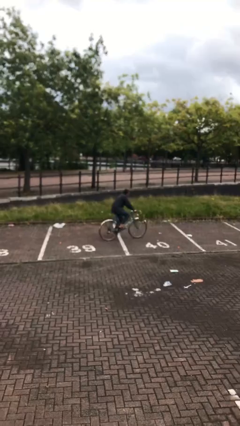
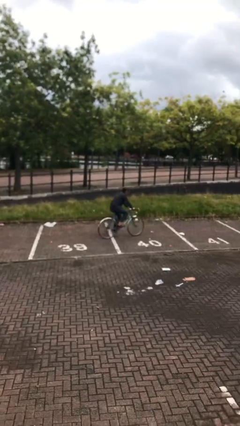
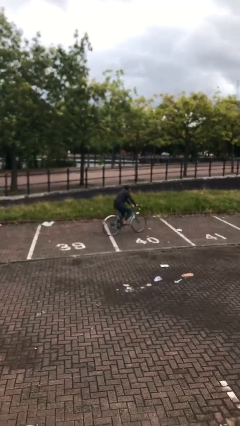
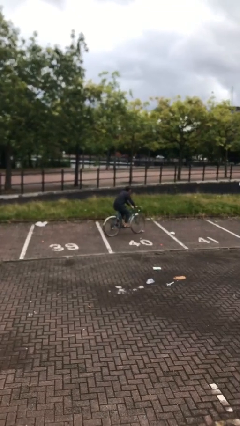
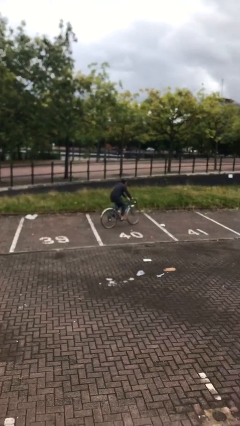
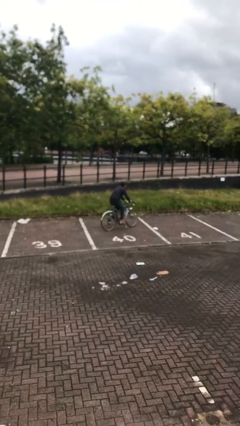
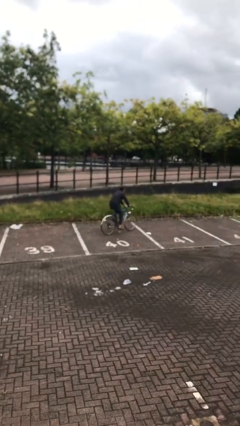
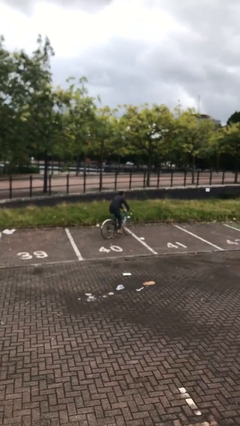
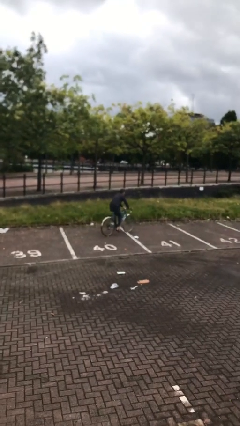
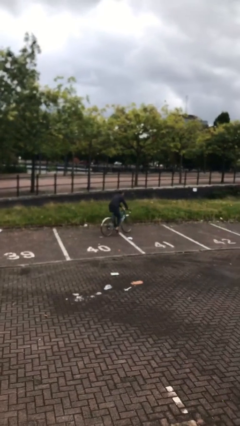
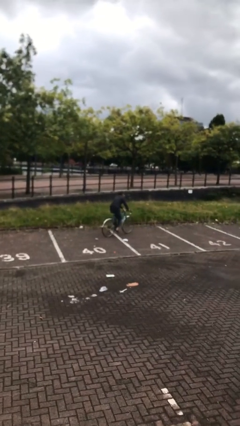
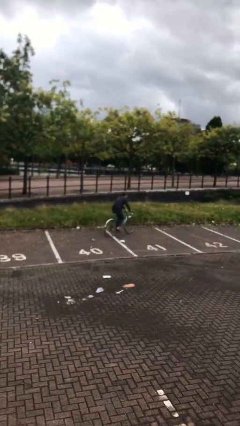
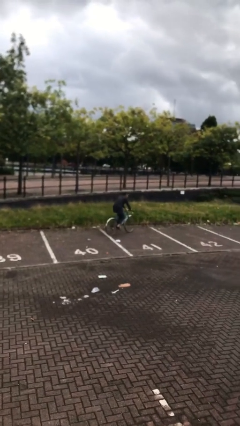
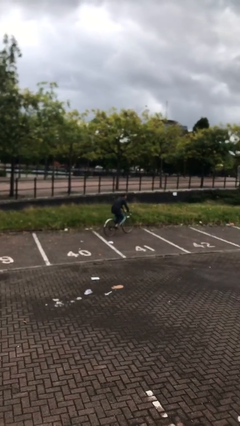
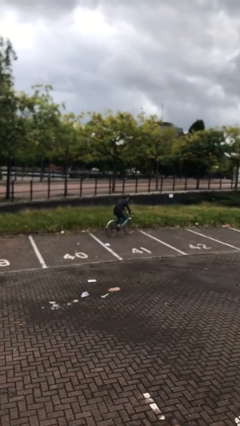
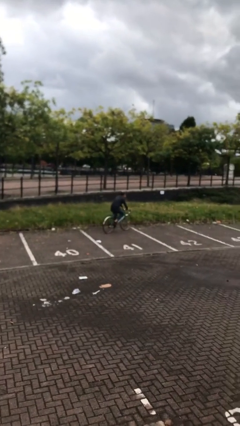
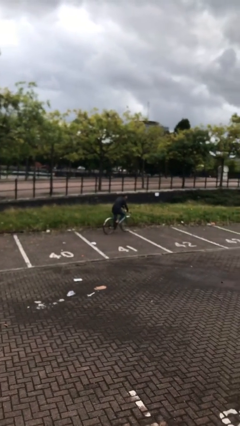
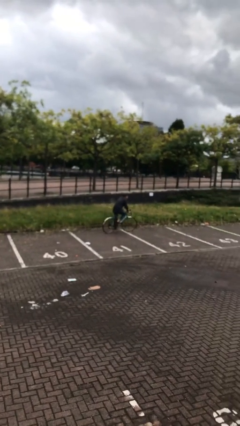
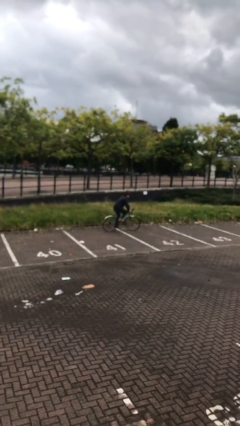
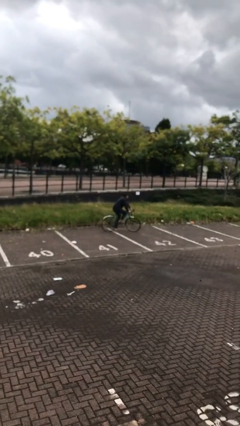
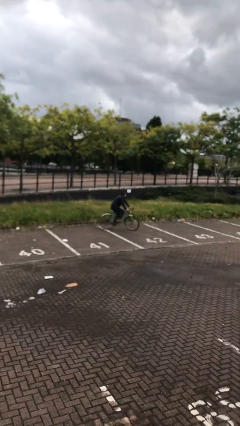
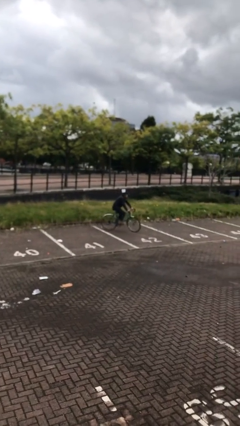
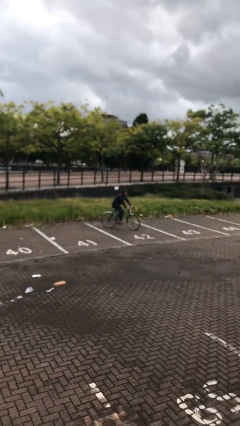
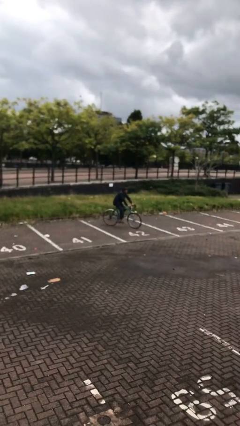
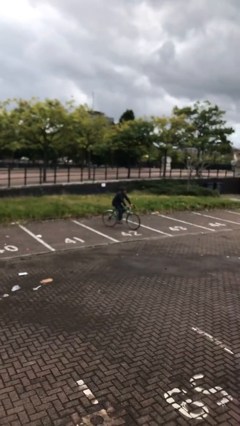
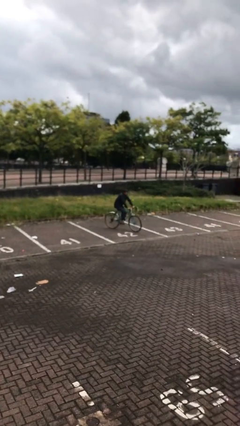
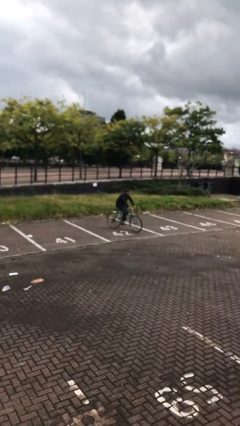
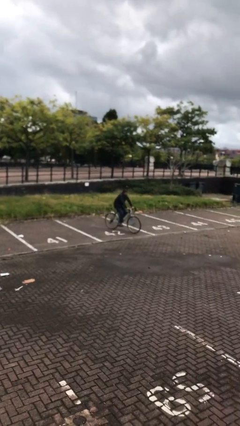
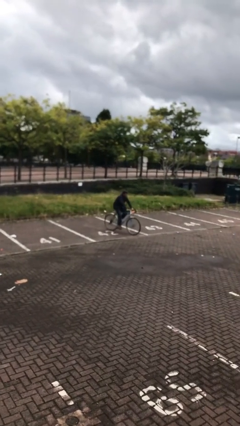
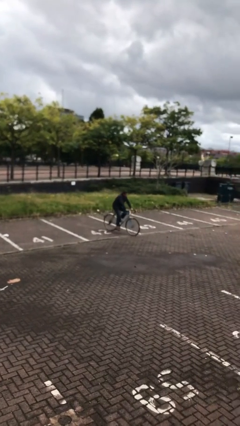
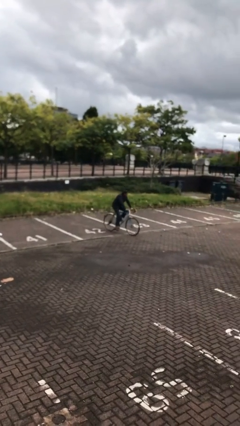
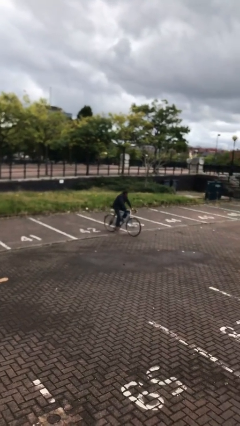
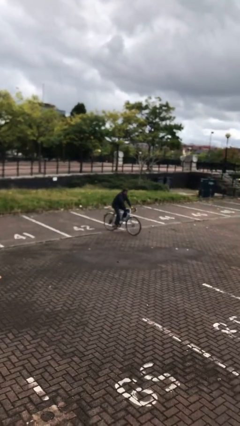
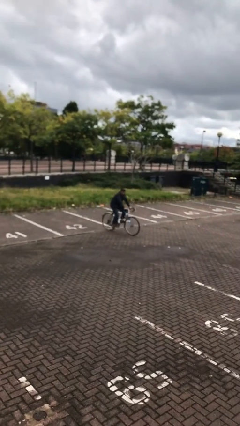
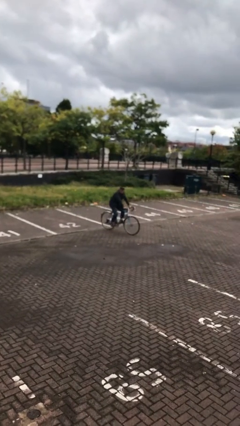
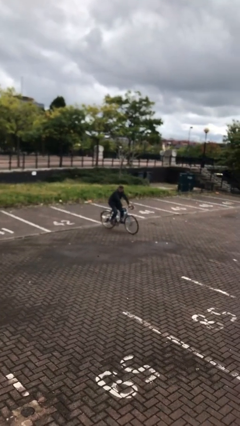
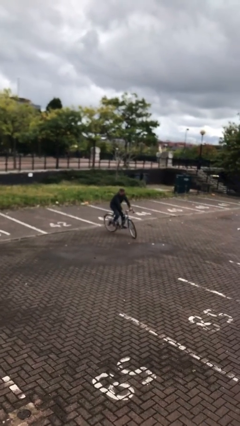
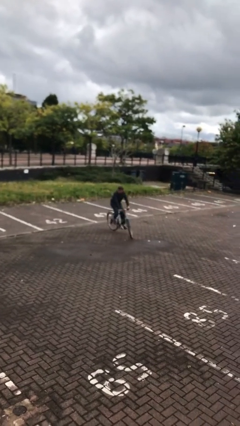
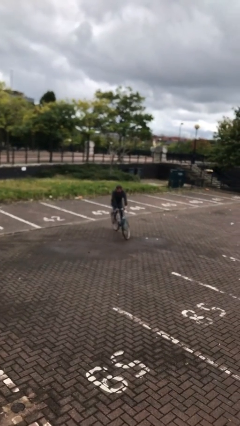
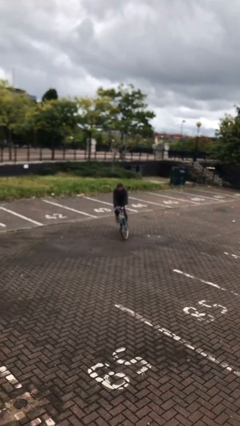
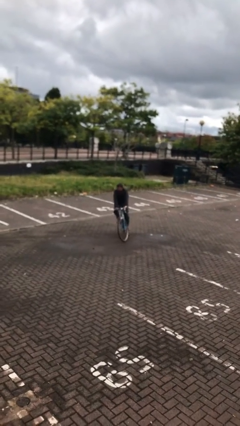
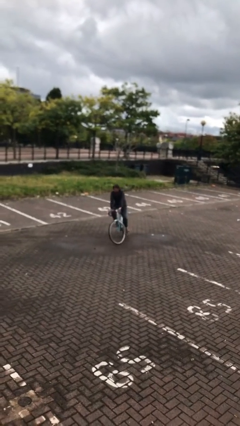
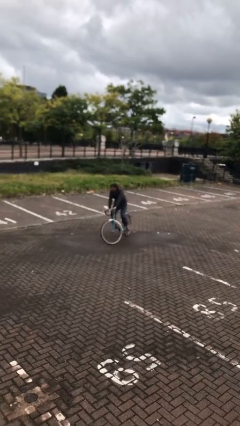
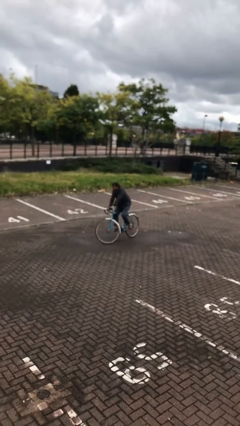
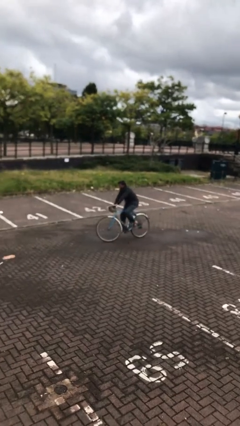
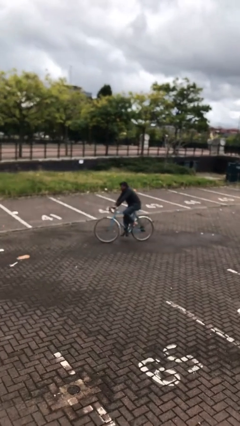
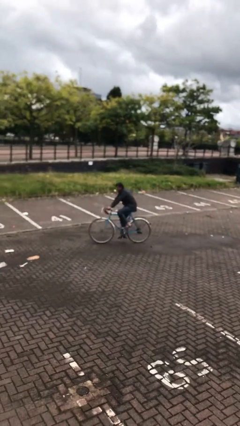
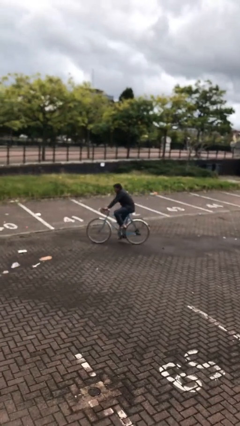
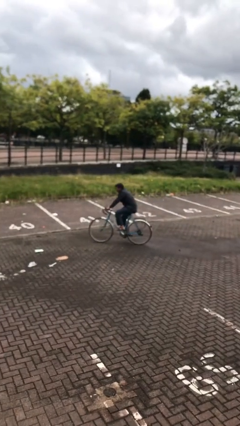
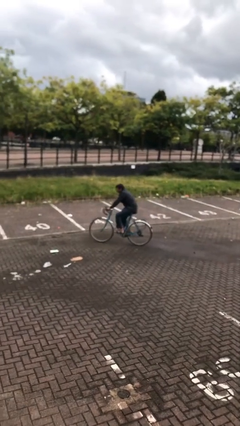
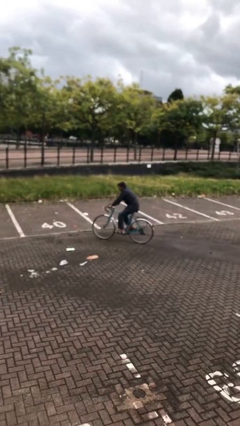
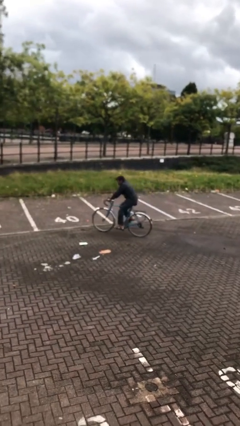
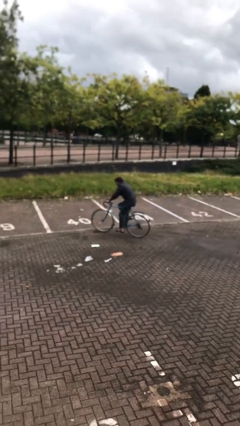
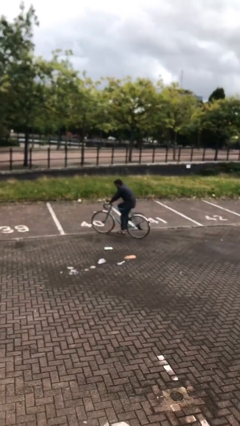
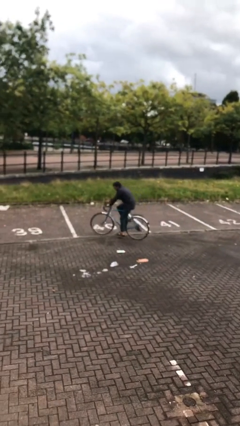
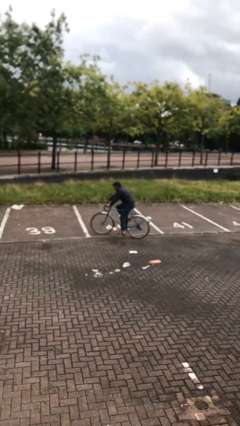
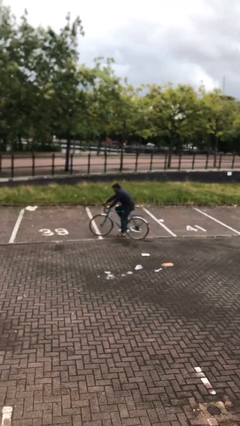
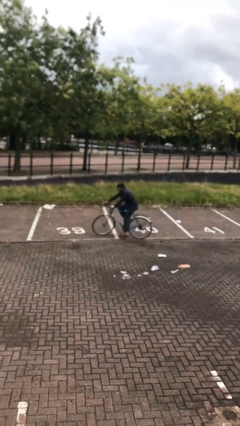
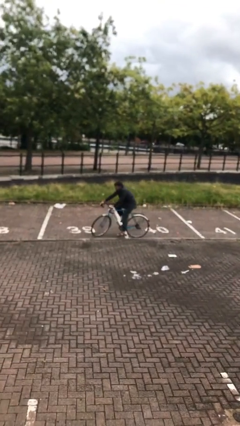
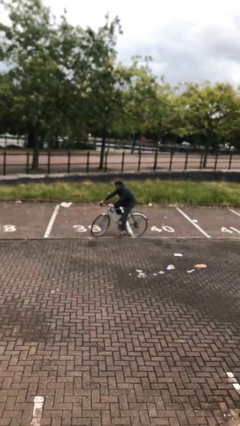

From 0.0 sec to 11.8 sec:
person rides bicycle

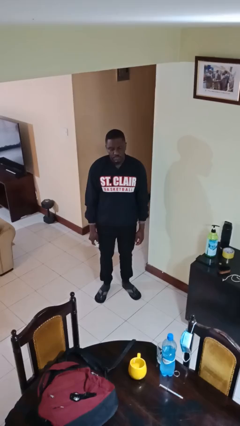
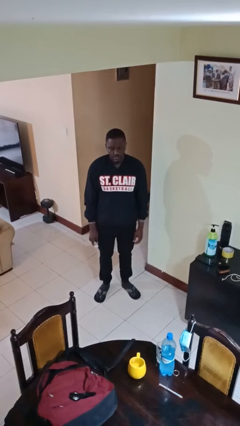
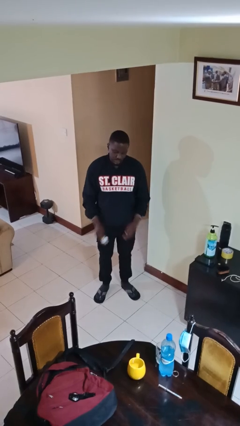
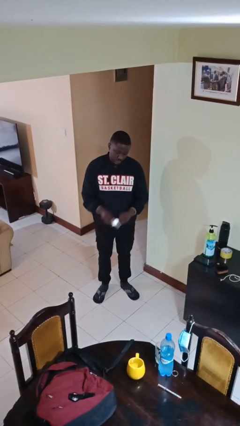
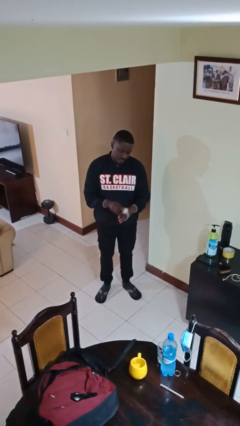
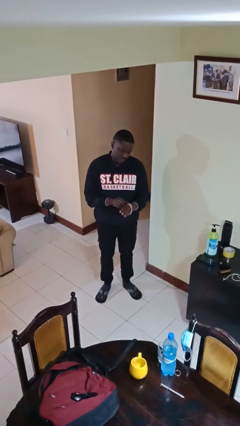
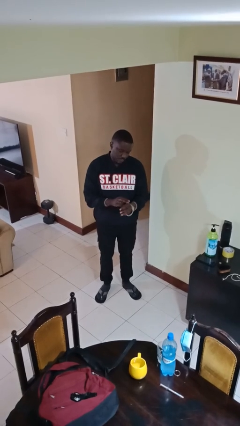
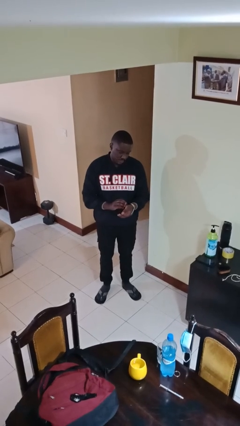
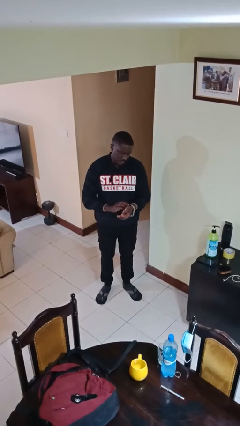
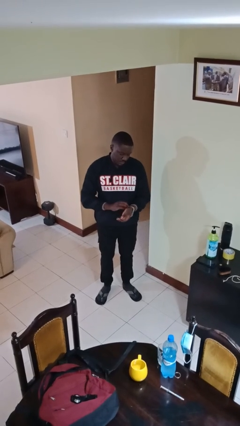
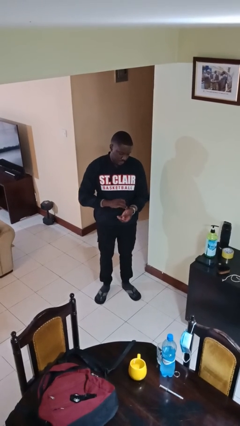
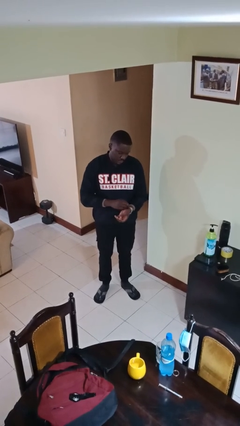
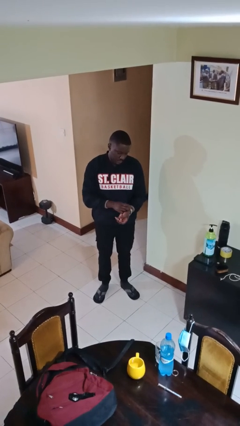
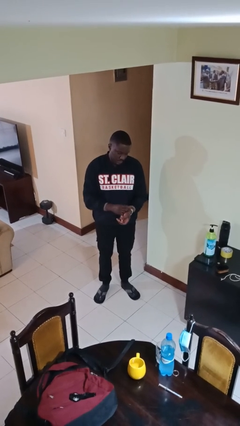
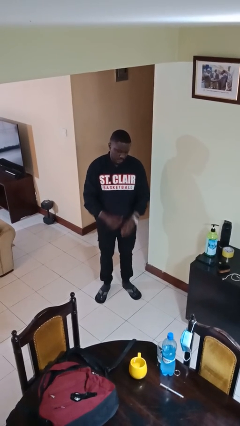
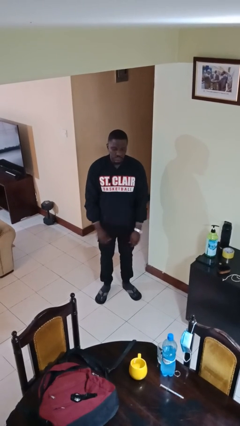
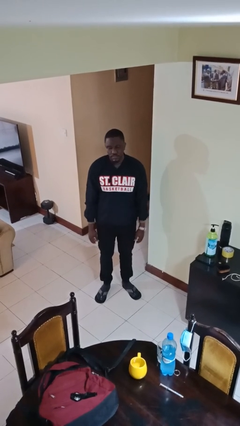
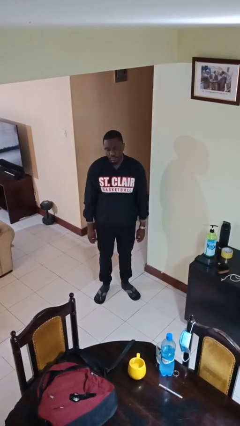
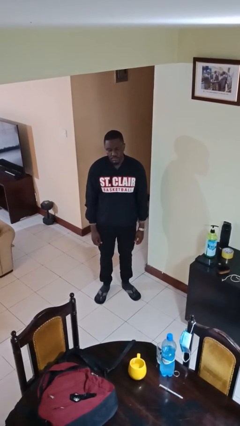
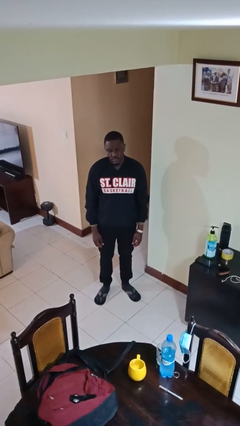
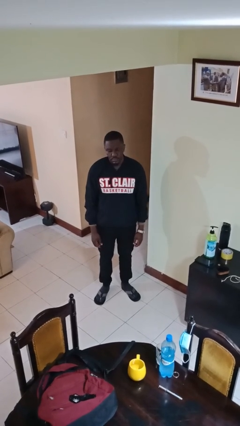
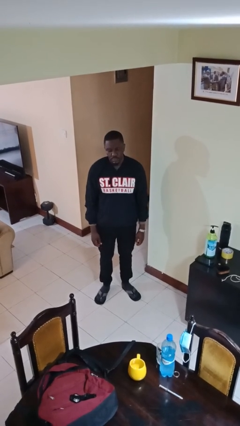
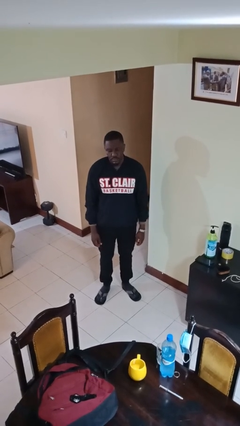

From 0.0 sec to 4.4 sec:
person puts on wristwatch

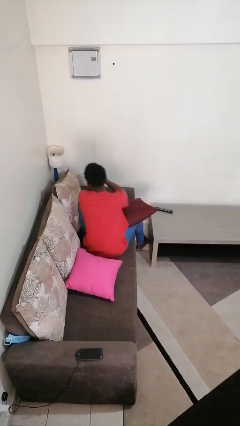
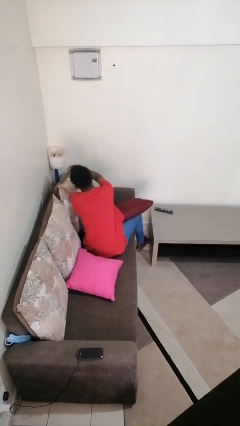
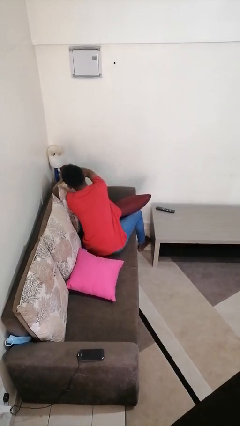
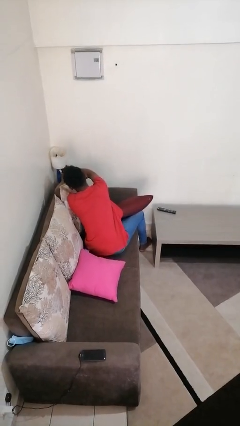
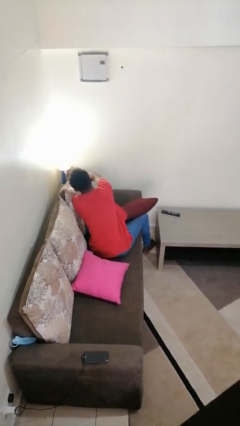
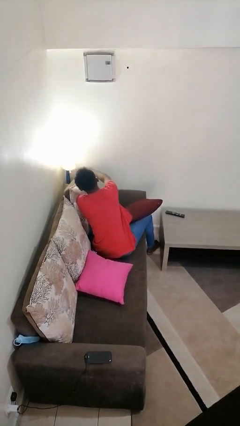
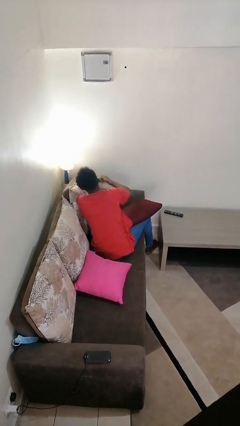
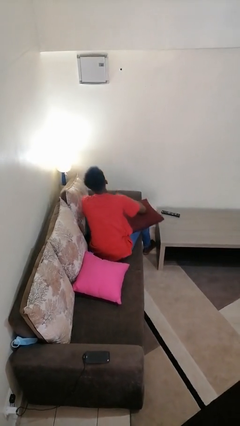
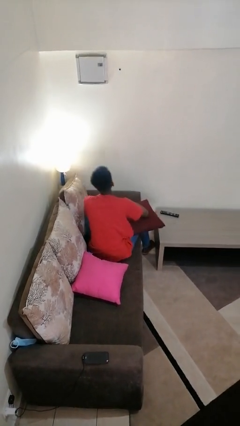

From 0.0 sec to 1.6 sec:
person turns on lamp
